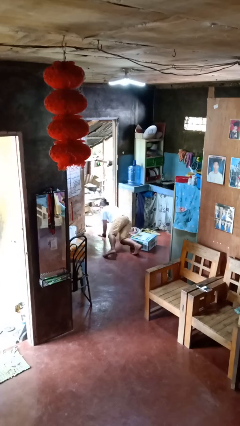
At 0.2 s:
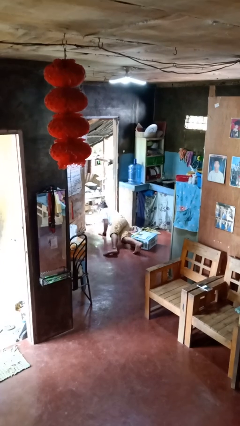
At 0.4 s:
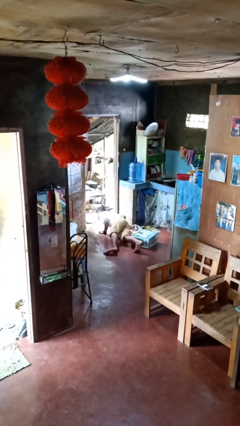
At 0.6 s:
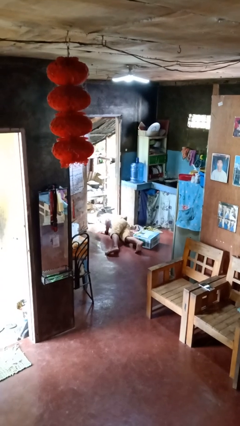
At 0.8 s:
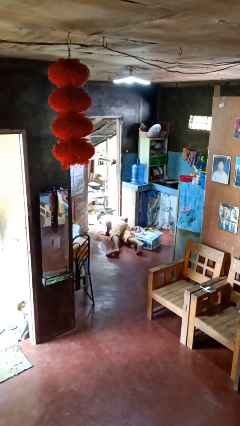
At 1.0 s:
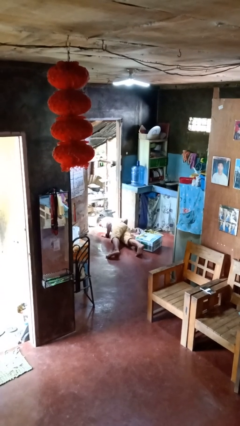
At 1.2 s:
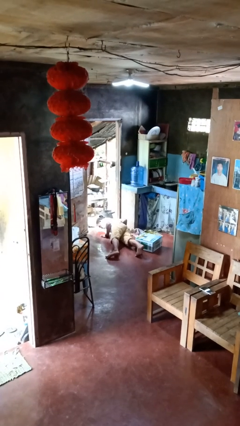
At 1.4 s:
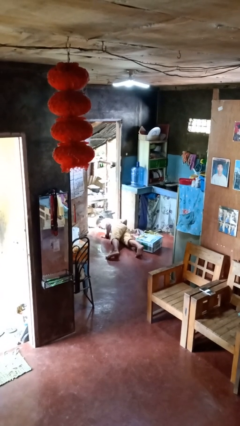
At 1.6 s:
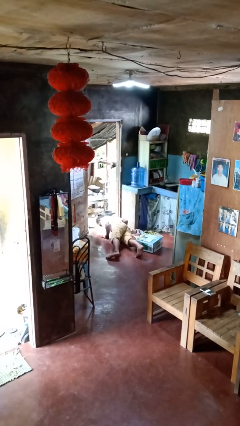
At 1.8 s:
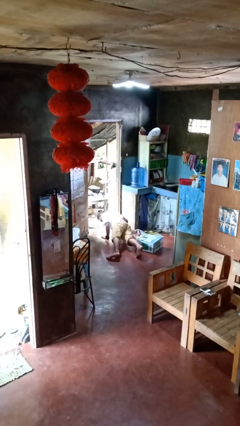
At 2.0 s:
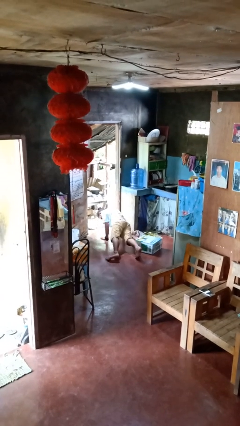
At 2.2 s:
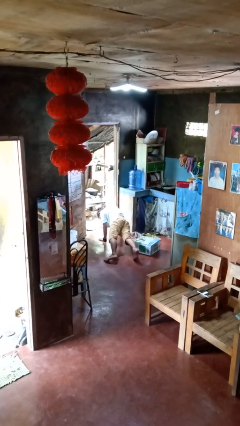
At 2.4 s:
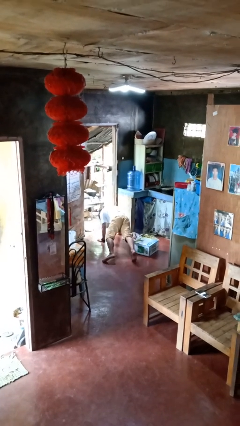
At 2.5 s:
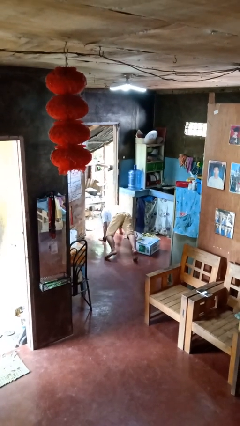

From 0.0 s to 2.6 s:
person lies down on floor

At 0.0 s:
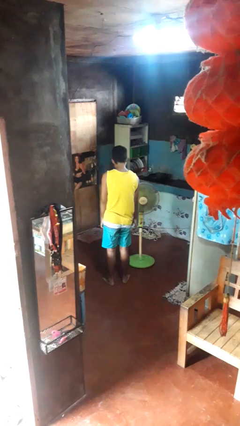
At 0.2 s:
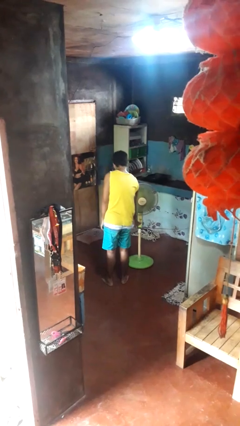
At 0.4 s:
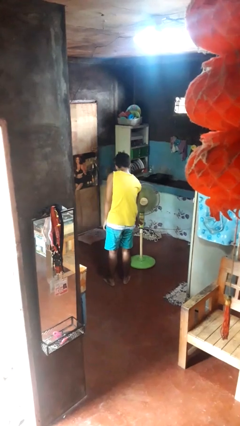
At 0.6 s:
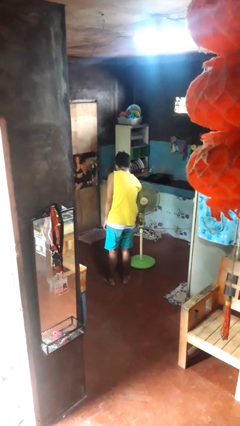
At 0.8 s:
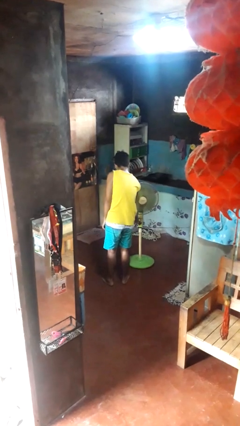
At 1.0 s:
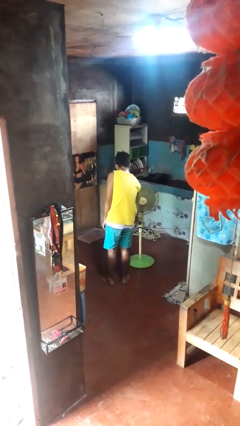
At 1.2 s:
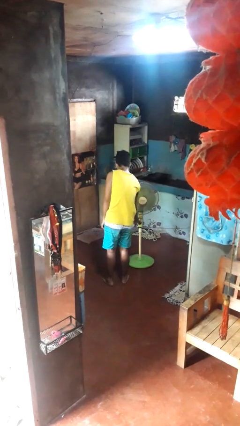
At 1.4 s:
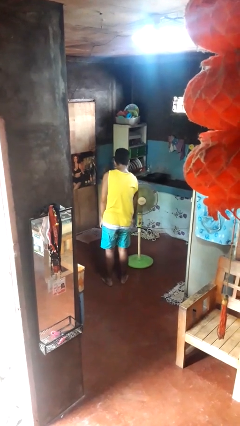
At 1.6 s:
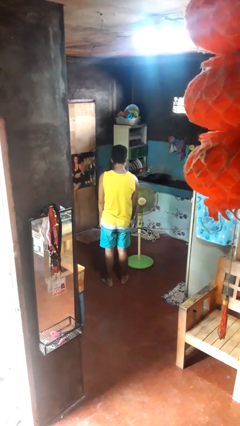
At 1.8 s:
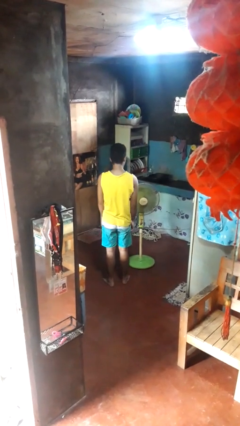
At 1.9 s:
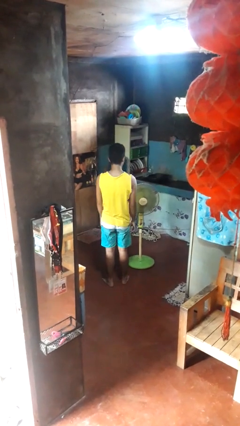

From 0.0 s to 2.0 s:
person turns off fan

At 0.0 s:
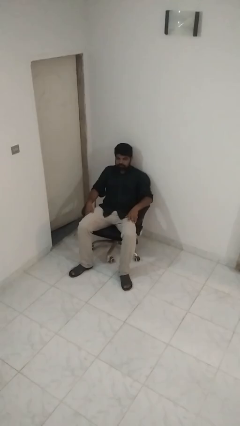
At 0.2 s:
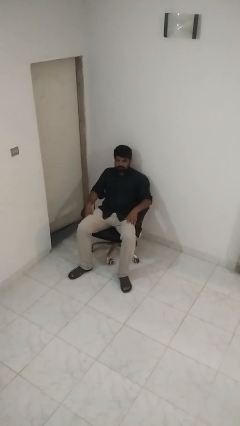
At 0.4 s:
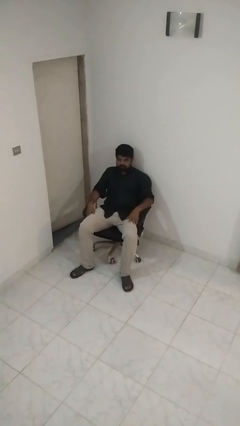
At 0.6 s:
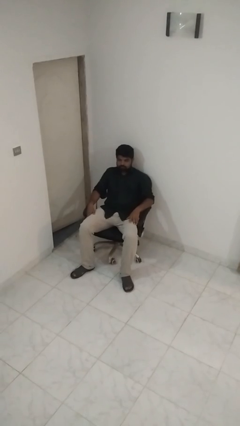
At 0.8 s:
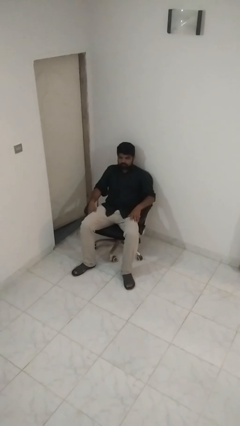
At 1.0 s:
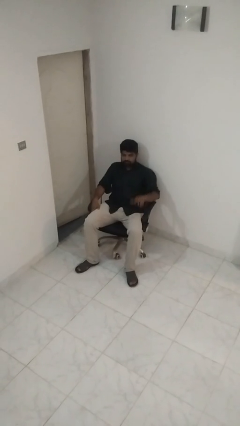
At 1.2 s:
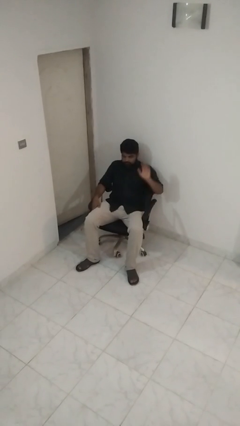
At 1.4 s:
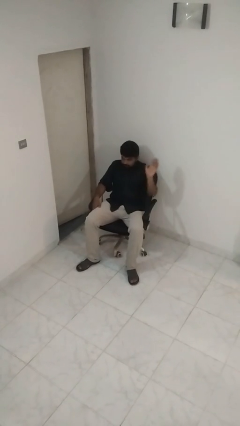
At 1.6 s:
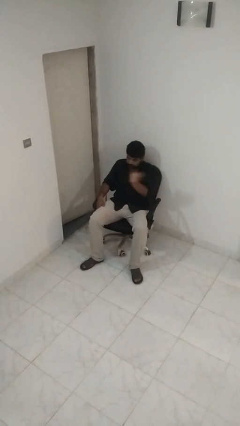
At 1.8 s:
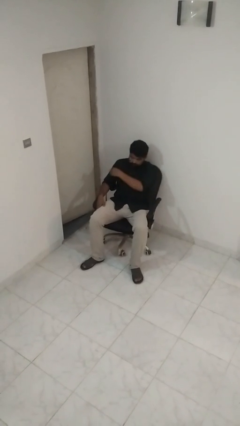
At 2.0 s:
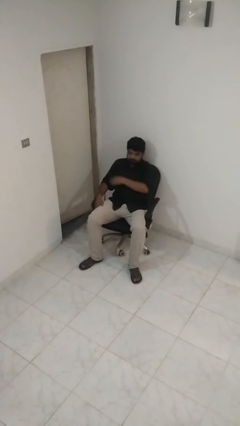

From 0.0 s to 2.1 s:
person gestures swipe right

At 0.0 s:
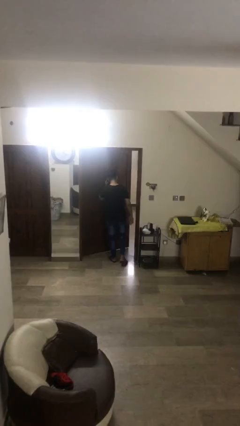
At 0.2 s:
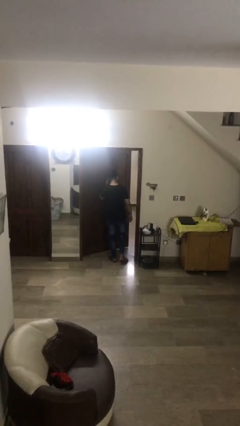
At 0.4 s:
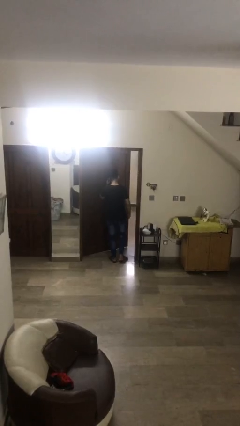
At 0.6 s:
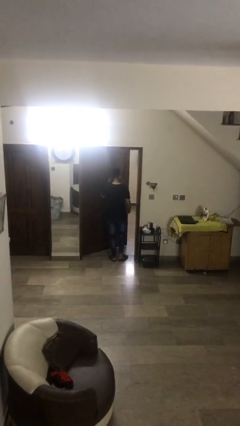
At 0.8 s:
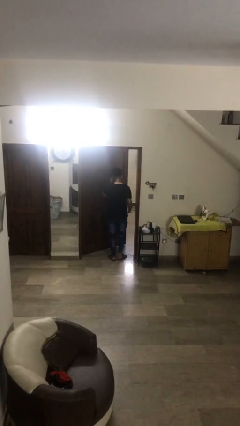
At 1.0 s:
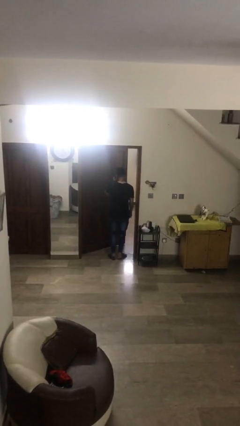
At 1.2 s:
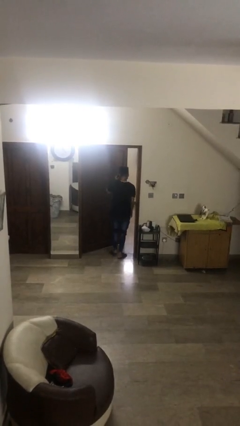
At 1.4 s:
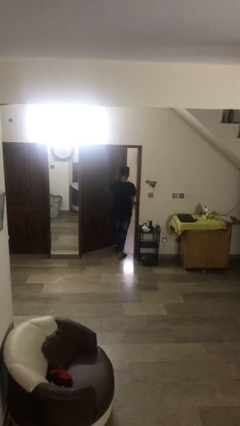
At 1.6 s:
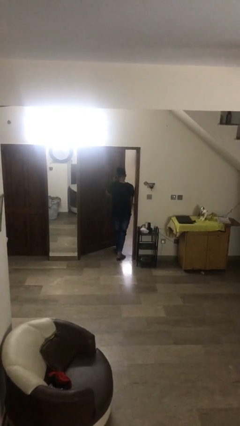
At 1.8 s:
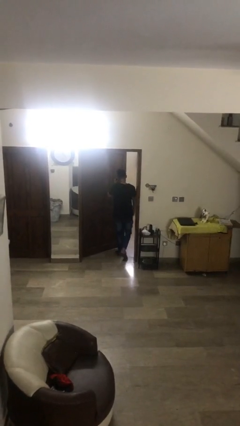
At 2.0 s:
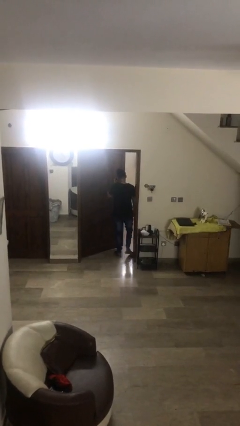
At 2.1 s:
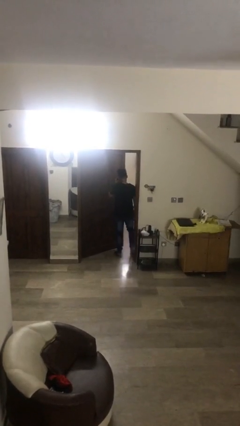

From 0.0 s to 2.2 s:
person exits scene through structure

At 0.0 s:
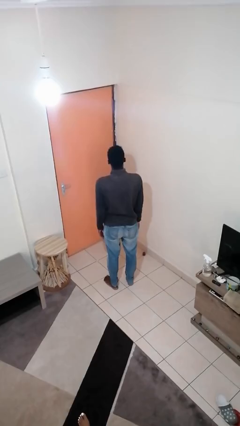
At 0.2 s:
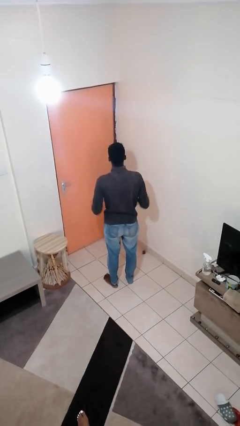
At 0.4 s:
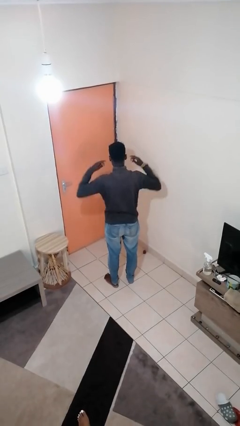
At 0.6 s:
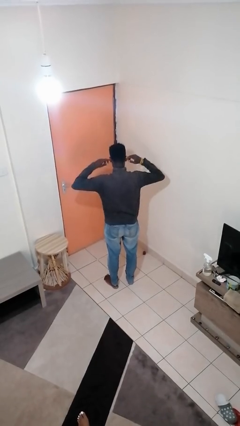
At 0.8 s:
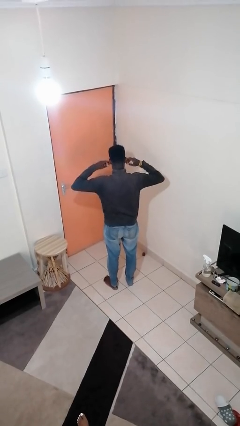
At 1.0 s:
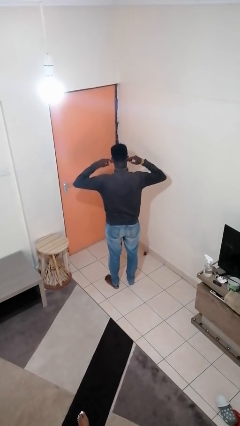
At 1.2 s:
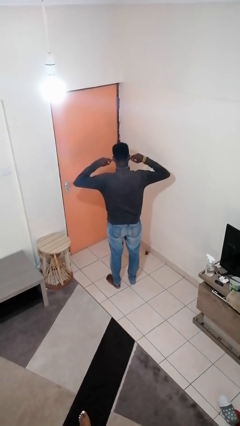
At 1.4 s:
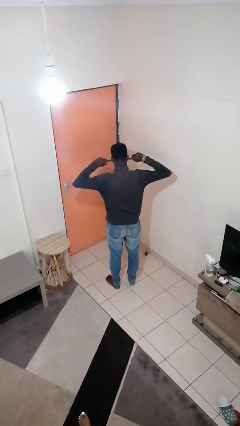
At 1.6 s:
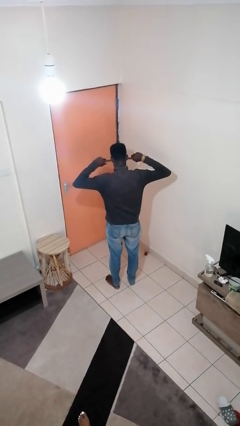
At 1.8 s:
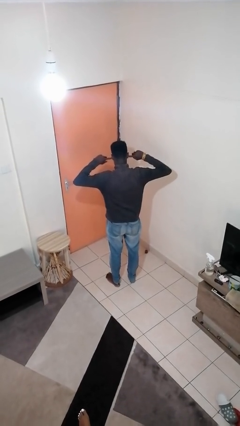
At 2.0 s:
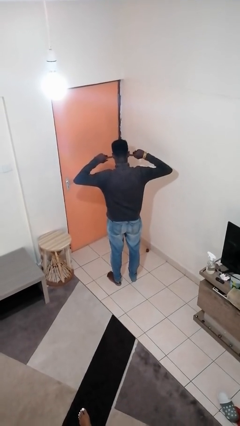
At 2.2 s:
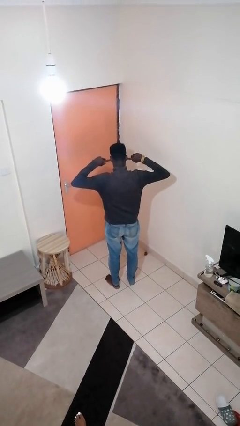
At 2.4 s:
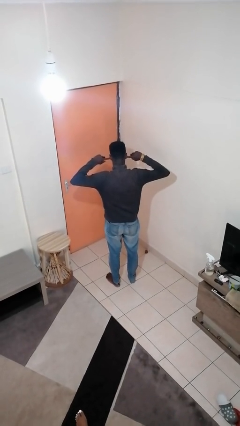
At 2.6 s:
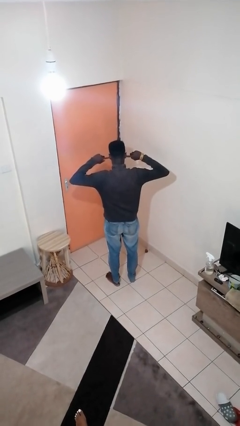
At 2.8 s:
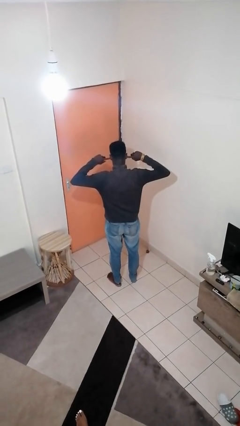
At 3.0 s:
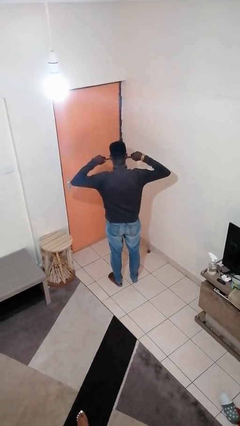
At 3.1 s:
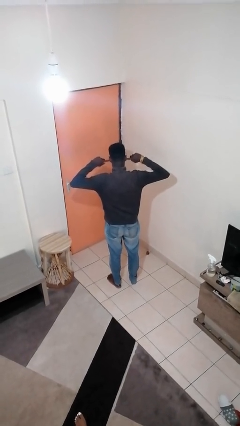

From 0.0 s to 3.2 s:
person puts fingers in ear

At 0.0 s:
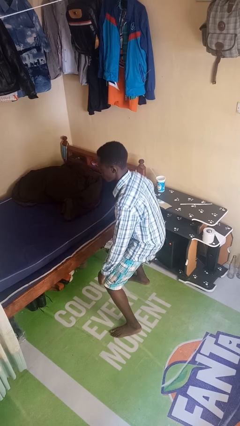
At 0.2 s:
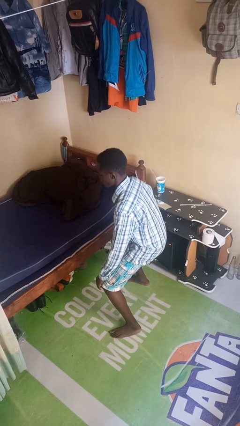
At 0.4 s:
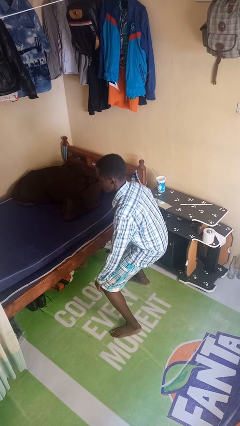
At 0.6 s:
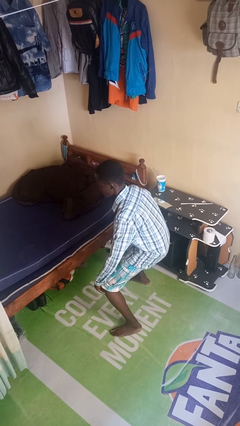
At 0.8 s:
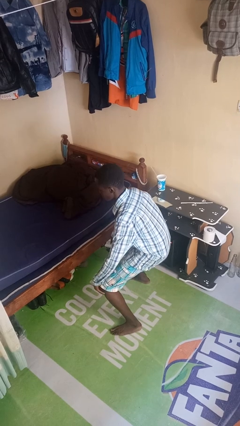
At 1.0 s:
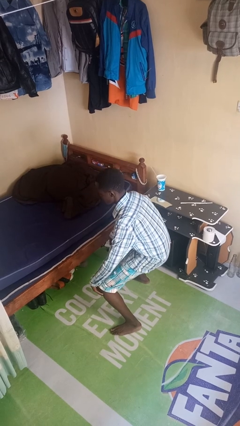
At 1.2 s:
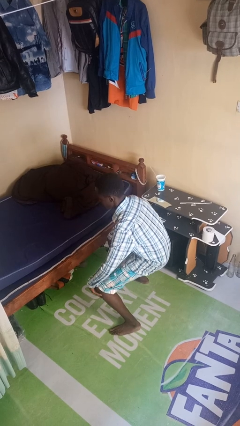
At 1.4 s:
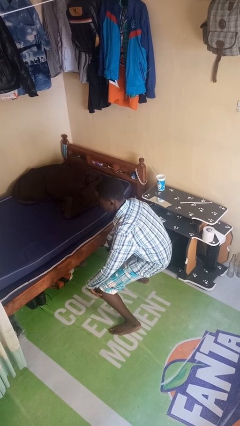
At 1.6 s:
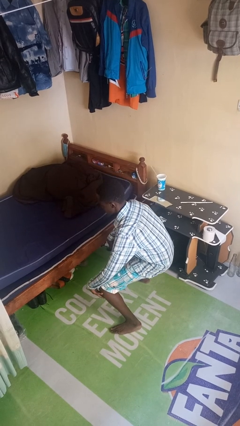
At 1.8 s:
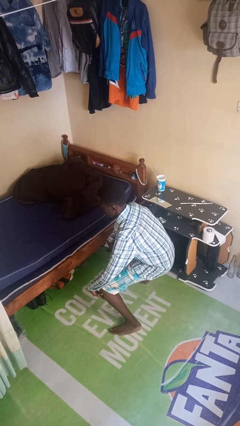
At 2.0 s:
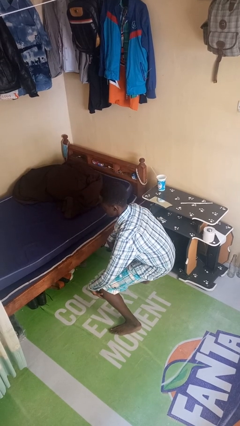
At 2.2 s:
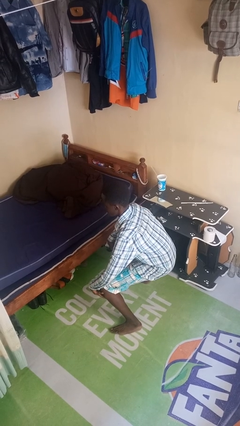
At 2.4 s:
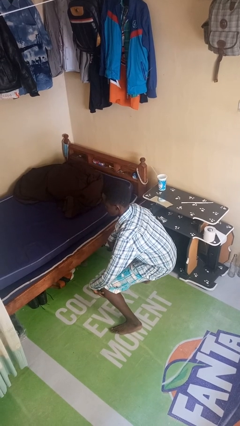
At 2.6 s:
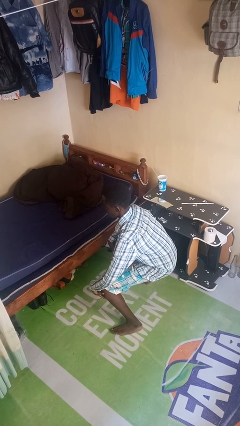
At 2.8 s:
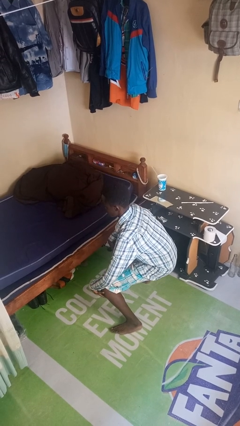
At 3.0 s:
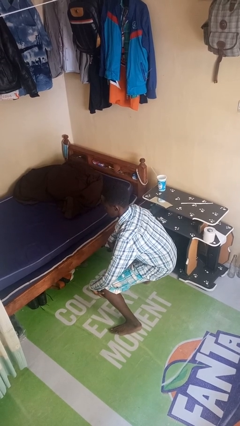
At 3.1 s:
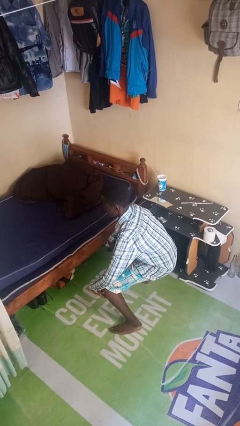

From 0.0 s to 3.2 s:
person squats

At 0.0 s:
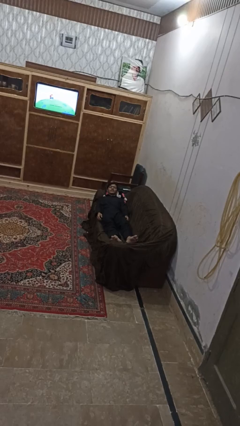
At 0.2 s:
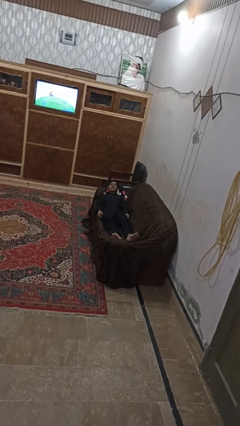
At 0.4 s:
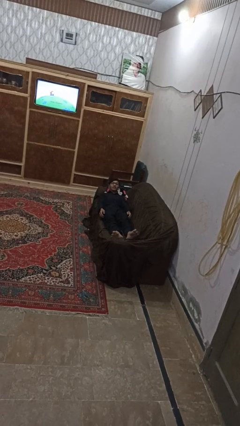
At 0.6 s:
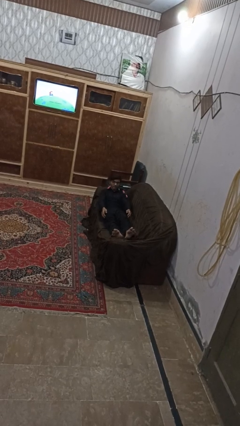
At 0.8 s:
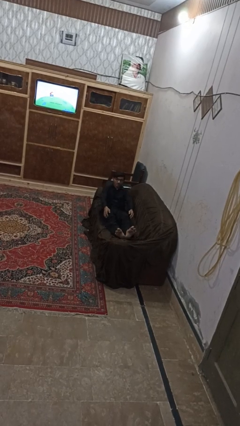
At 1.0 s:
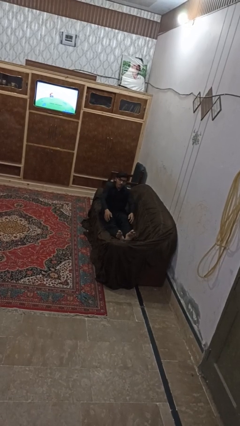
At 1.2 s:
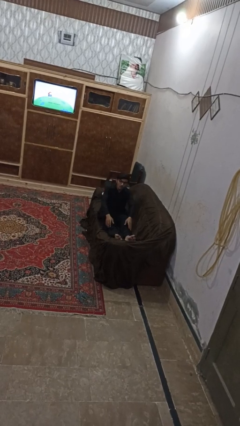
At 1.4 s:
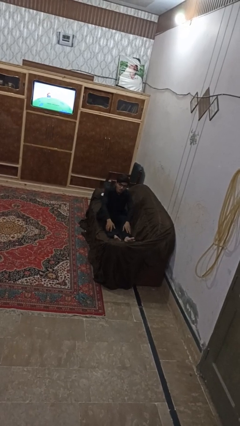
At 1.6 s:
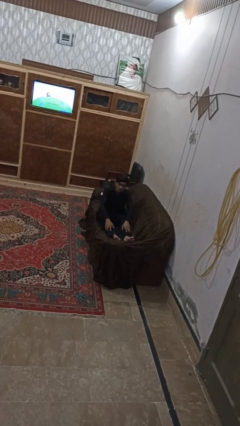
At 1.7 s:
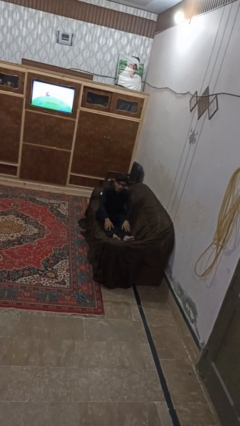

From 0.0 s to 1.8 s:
person stands up

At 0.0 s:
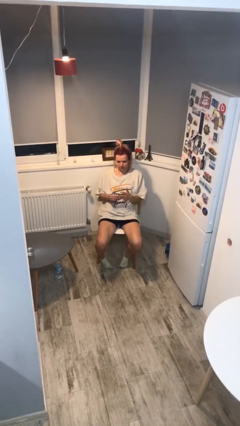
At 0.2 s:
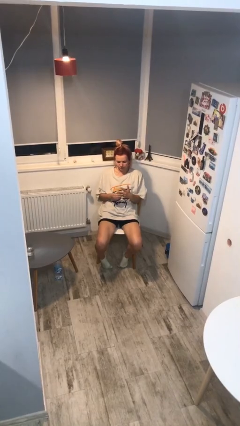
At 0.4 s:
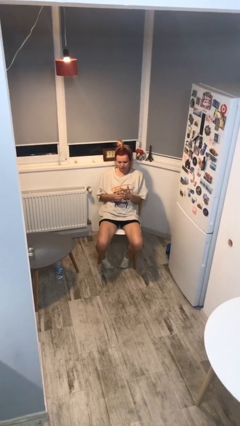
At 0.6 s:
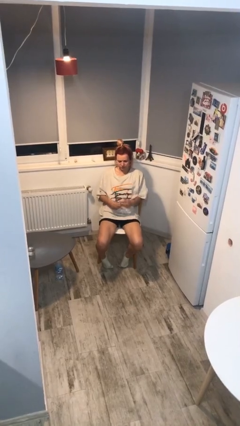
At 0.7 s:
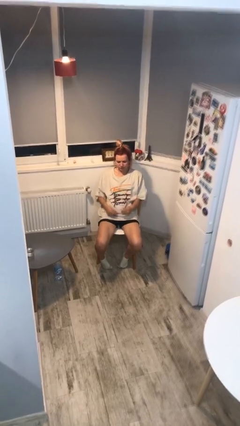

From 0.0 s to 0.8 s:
person puts on ring
